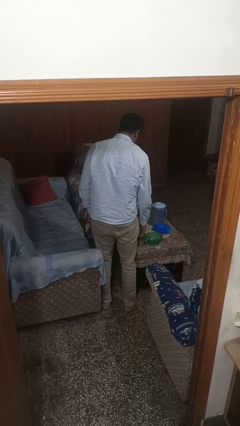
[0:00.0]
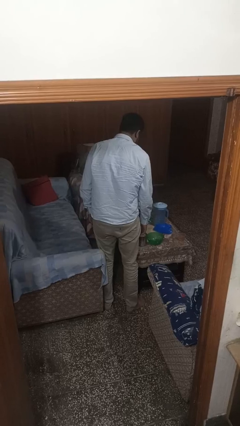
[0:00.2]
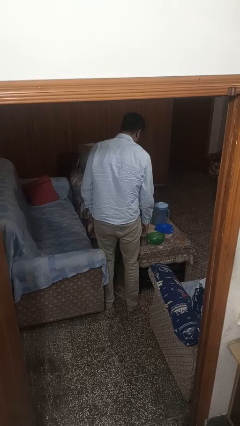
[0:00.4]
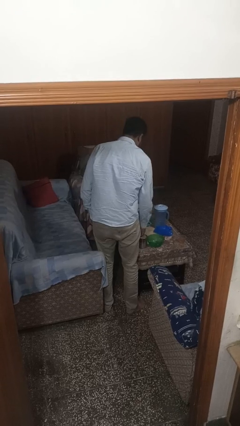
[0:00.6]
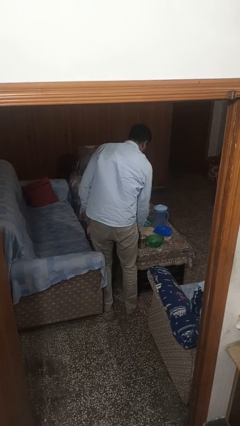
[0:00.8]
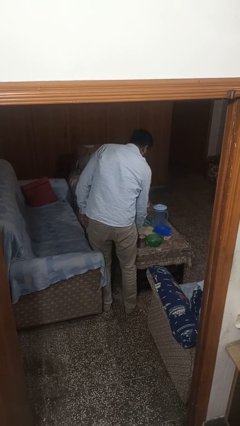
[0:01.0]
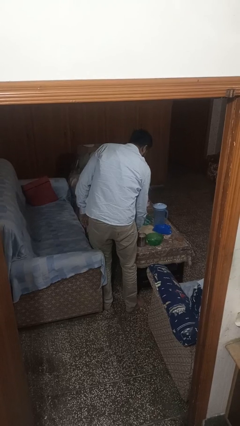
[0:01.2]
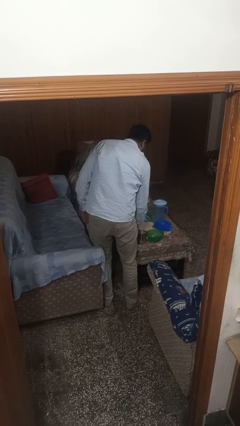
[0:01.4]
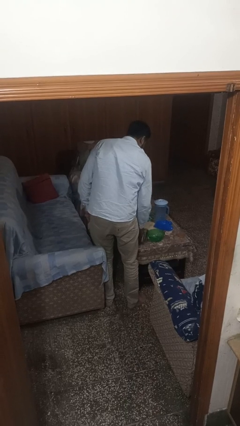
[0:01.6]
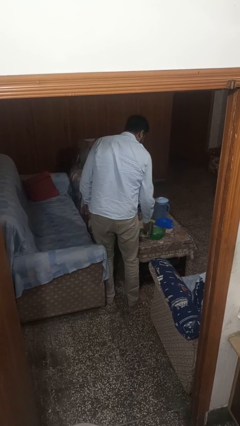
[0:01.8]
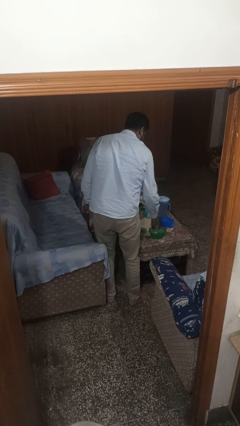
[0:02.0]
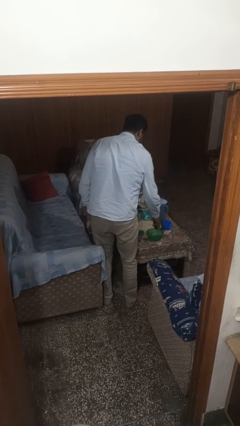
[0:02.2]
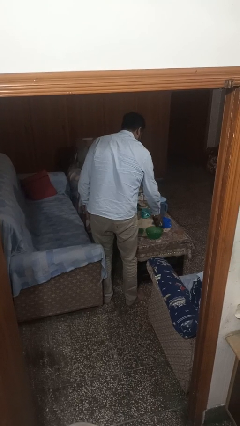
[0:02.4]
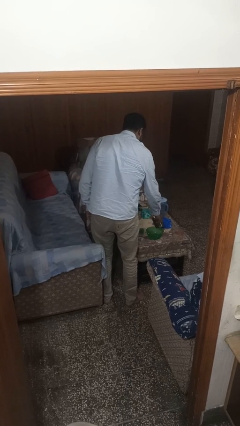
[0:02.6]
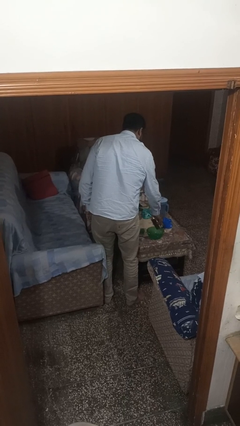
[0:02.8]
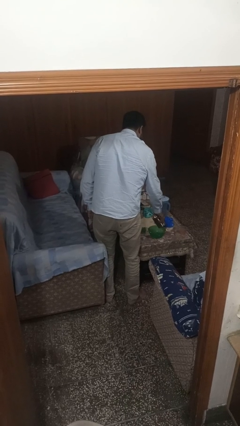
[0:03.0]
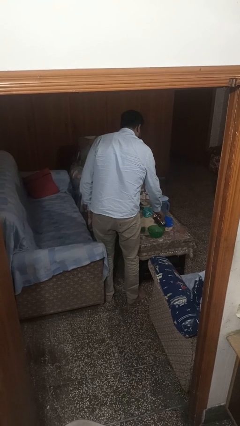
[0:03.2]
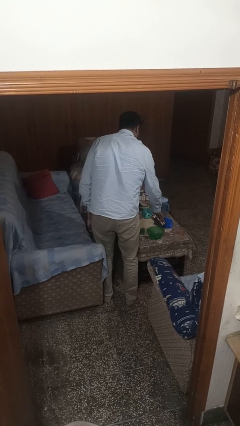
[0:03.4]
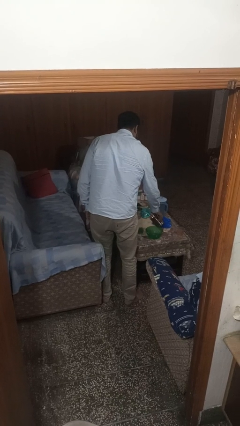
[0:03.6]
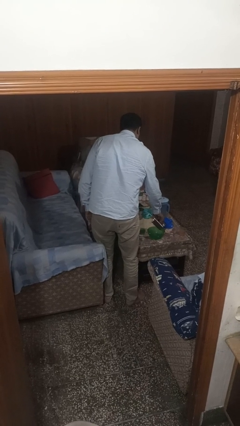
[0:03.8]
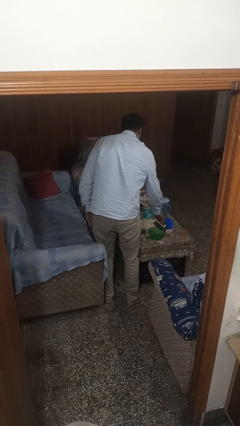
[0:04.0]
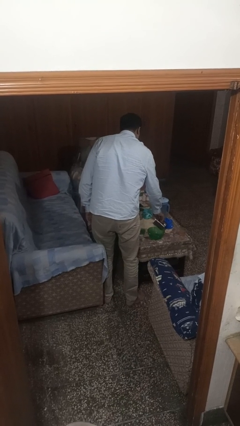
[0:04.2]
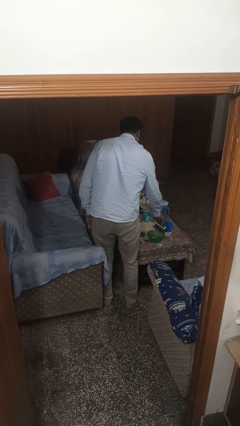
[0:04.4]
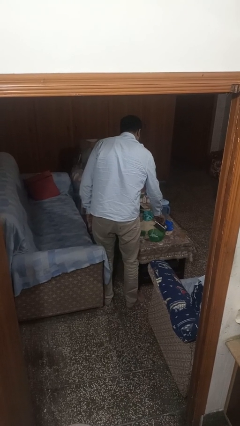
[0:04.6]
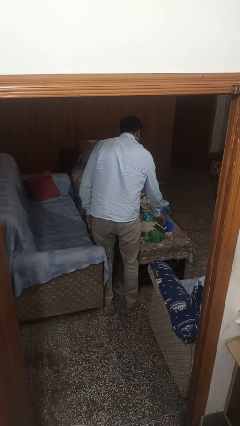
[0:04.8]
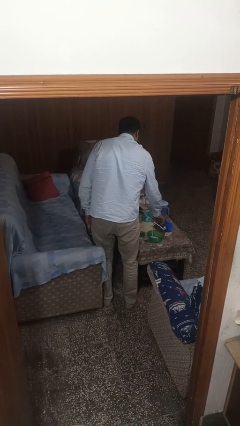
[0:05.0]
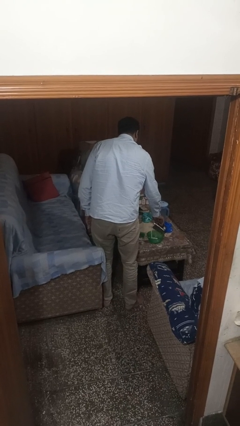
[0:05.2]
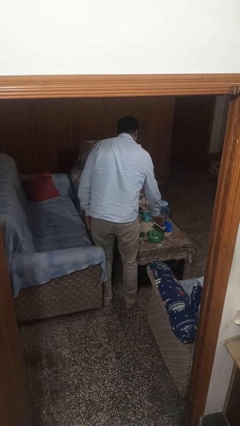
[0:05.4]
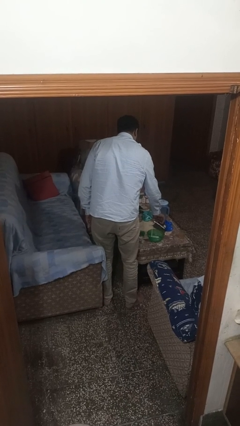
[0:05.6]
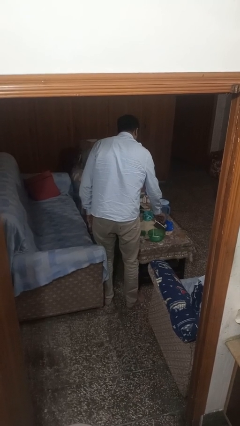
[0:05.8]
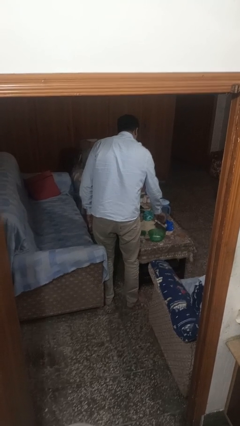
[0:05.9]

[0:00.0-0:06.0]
person pours into bowl

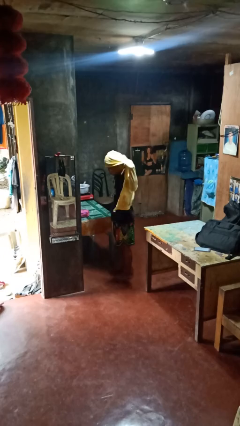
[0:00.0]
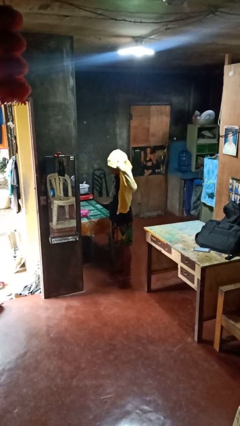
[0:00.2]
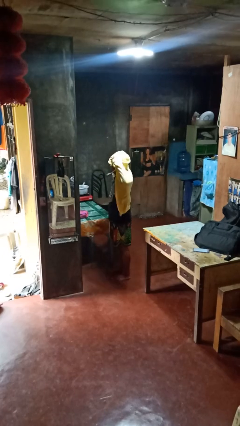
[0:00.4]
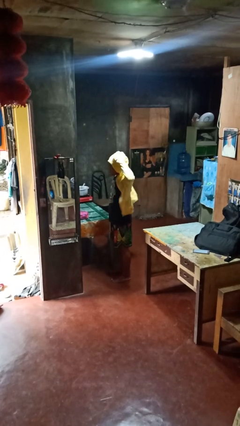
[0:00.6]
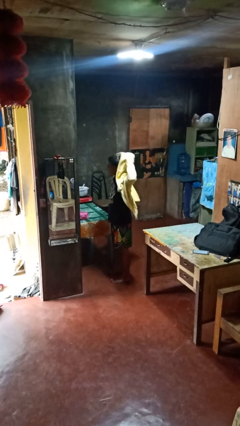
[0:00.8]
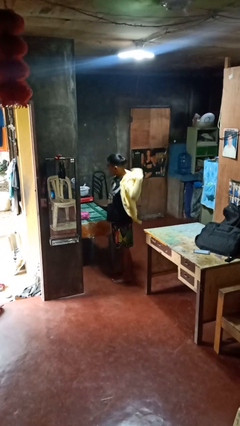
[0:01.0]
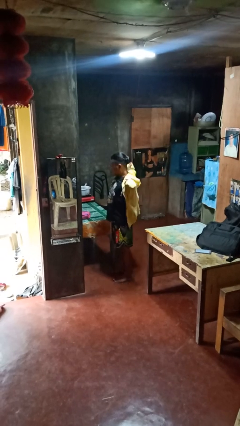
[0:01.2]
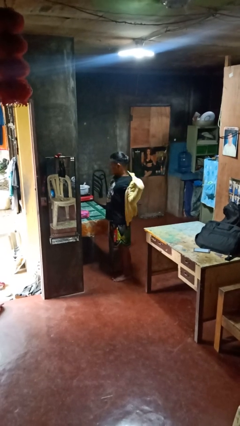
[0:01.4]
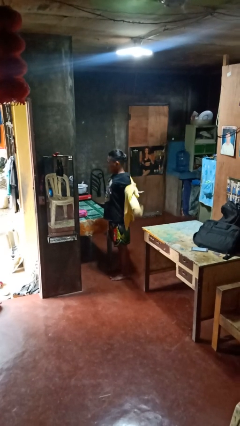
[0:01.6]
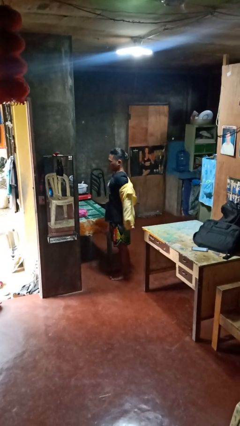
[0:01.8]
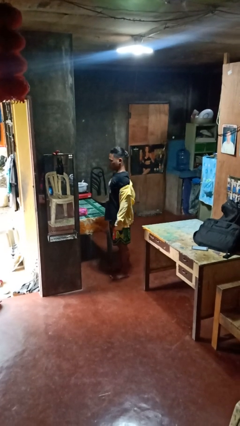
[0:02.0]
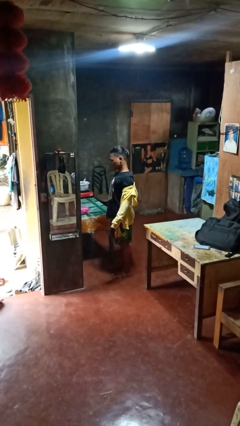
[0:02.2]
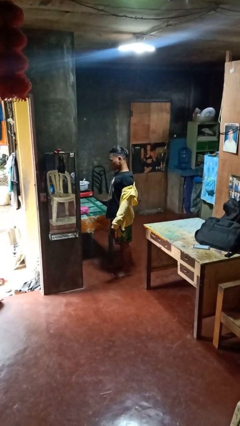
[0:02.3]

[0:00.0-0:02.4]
person takes off hoodie

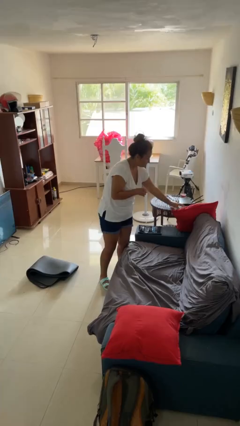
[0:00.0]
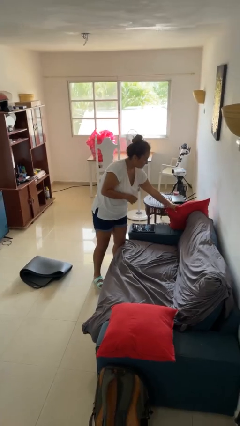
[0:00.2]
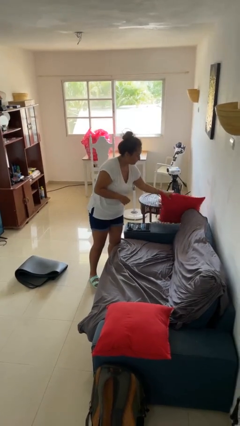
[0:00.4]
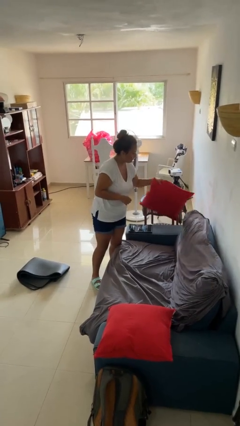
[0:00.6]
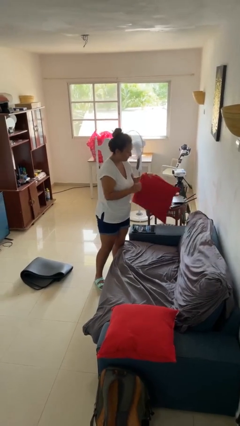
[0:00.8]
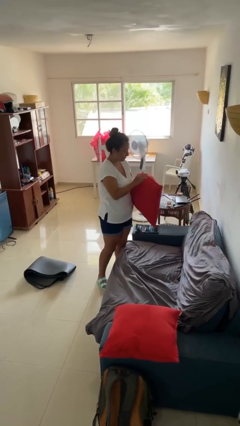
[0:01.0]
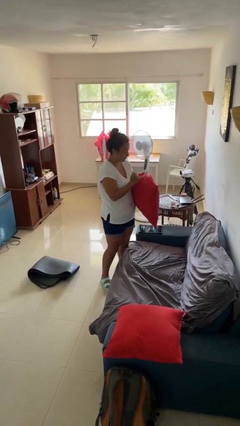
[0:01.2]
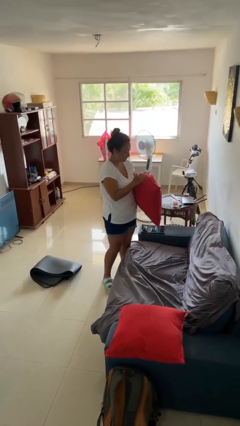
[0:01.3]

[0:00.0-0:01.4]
person picks up object from couch

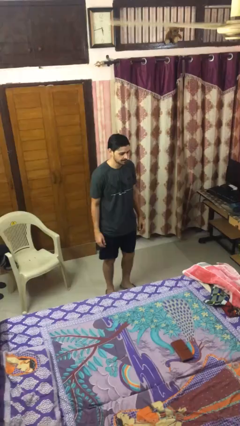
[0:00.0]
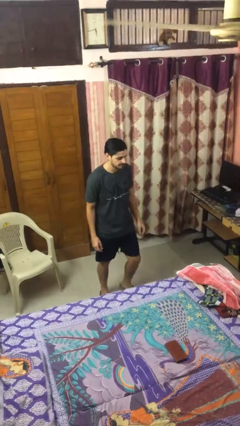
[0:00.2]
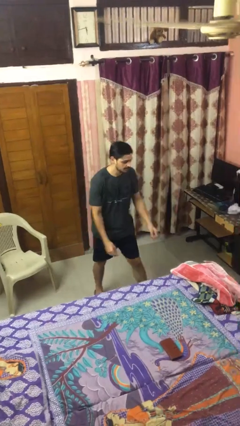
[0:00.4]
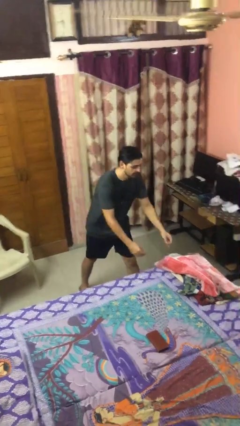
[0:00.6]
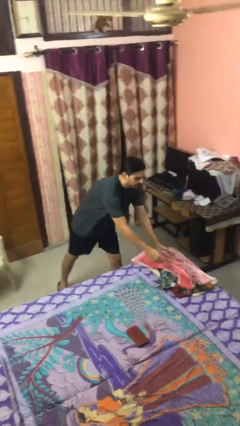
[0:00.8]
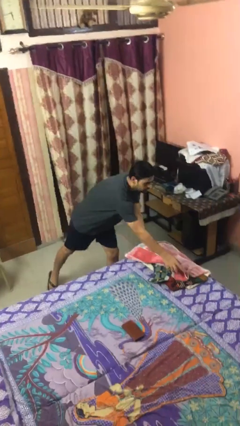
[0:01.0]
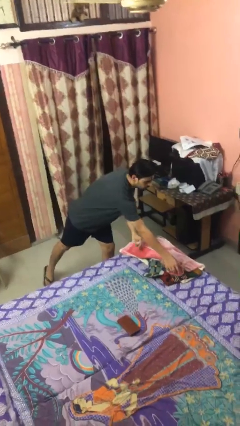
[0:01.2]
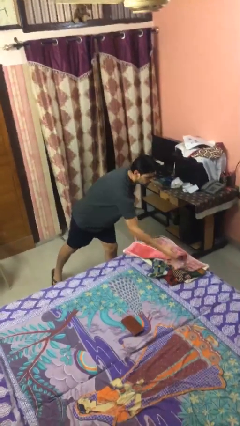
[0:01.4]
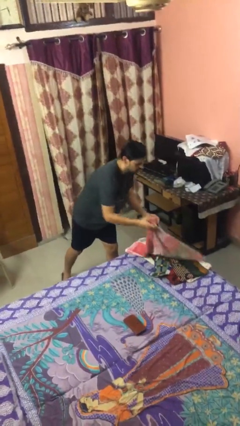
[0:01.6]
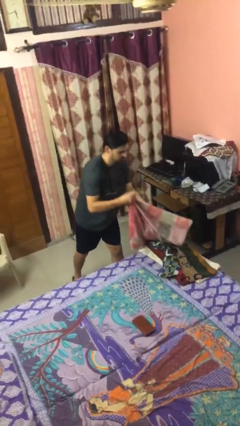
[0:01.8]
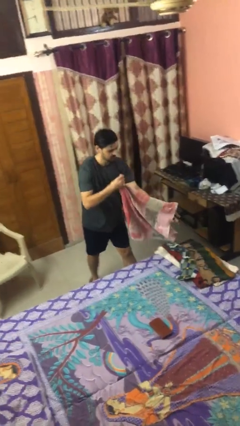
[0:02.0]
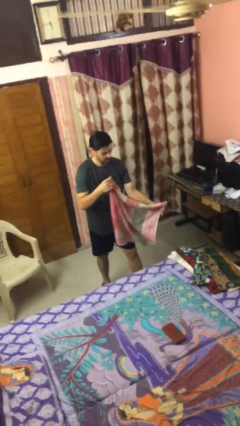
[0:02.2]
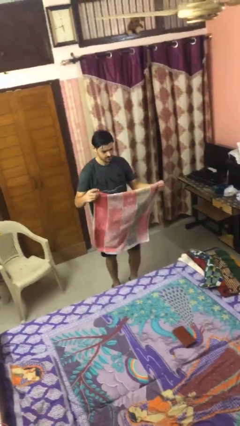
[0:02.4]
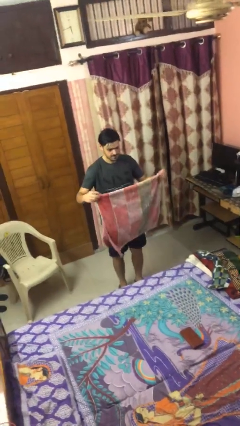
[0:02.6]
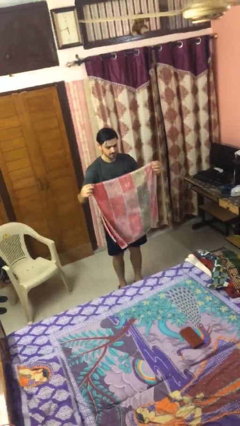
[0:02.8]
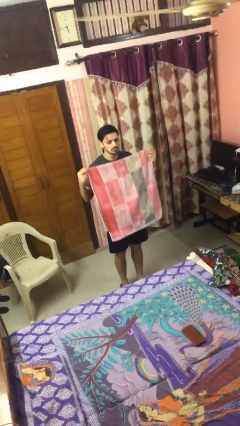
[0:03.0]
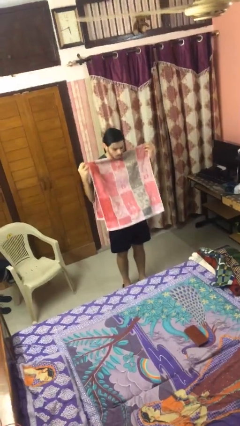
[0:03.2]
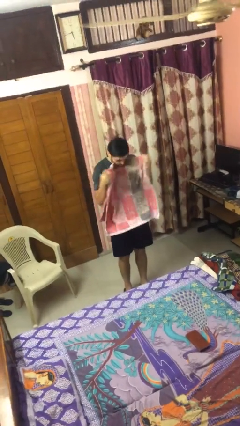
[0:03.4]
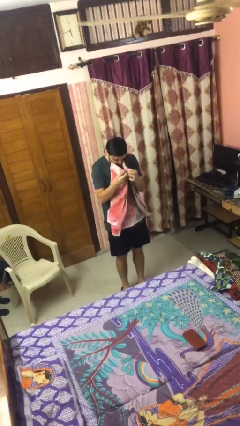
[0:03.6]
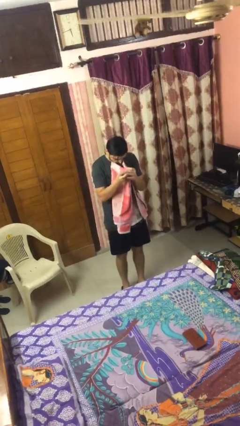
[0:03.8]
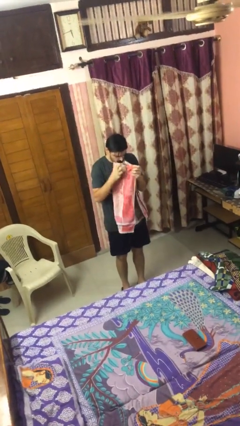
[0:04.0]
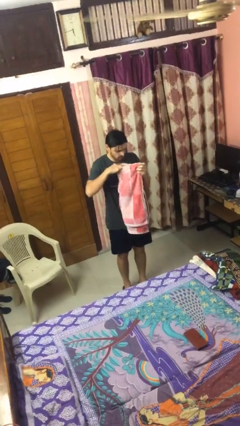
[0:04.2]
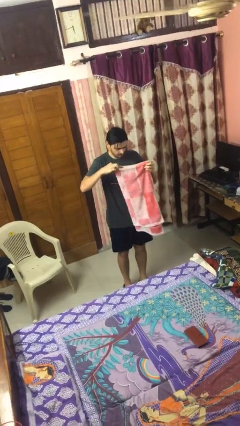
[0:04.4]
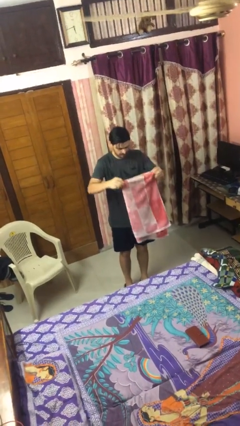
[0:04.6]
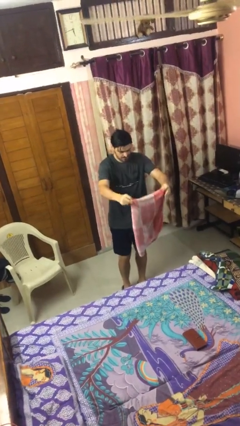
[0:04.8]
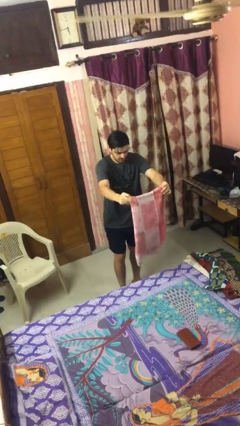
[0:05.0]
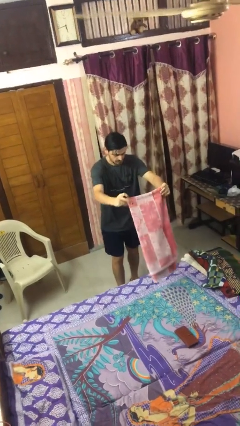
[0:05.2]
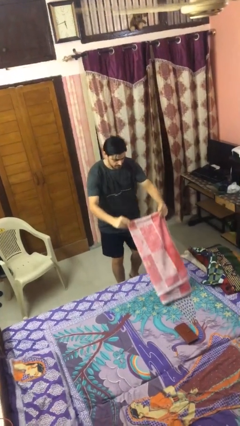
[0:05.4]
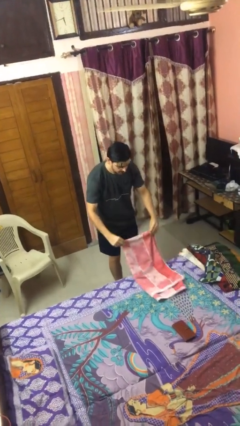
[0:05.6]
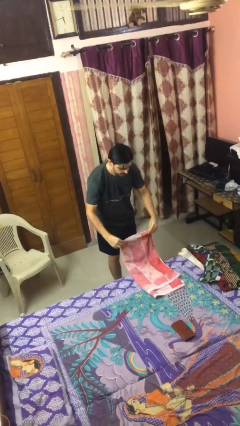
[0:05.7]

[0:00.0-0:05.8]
person folds towel

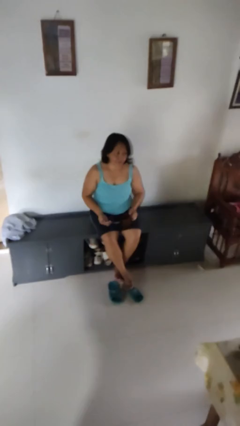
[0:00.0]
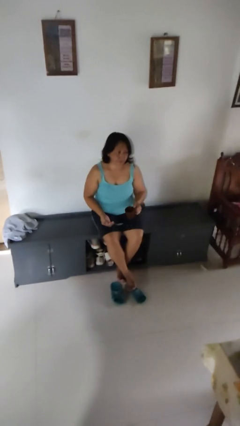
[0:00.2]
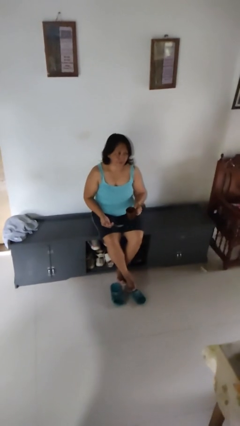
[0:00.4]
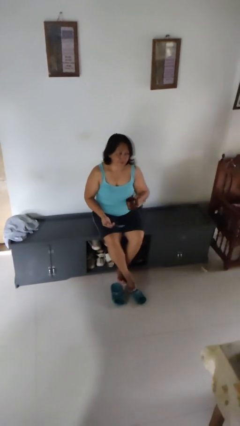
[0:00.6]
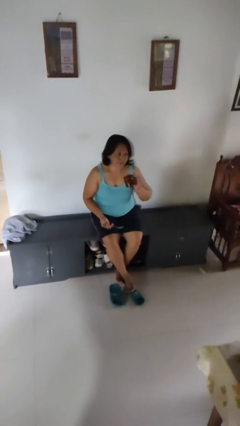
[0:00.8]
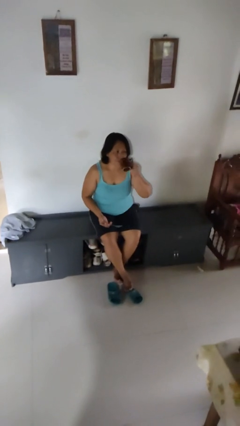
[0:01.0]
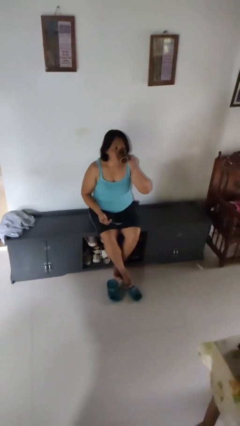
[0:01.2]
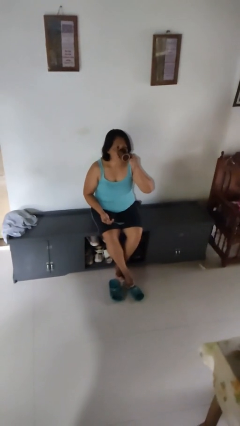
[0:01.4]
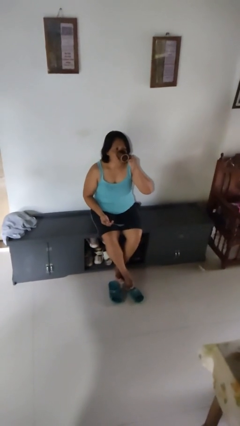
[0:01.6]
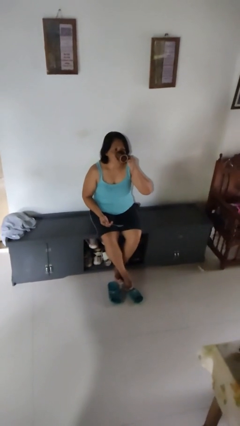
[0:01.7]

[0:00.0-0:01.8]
person drinks from mug

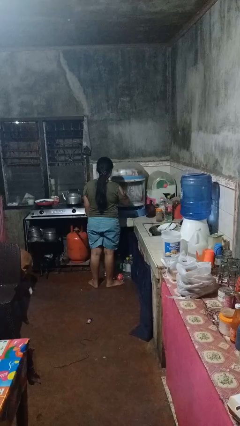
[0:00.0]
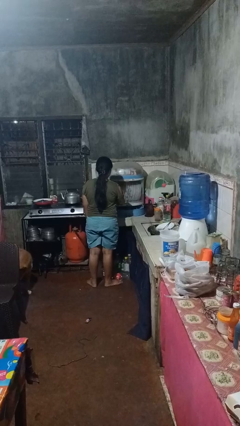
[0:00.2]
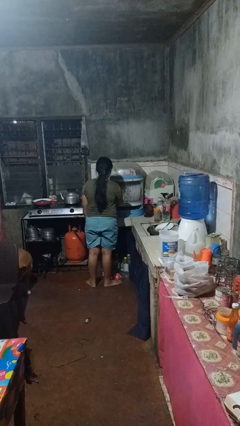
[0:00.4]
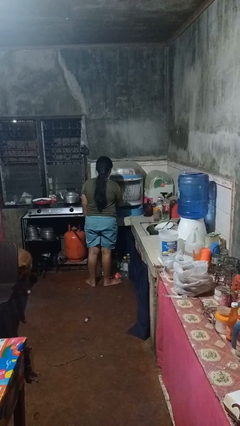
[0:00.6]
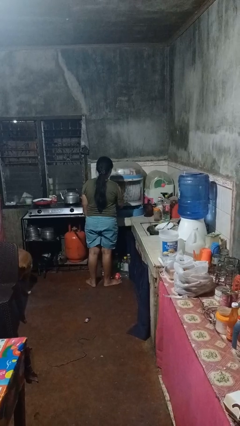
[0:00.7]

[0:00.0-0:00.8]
person puts object into kitchen drawer
